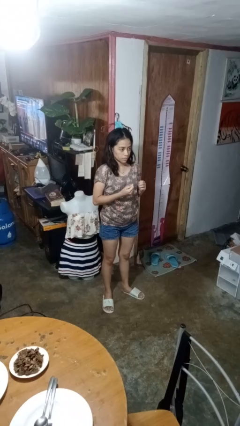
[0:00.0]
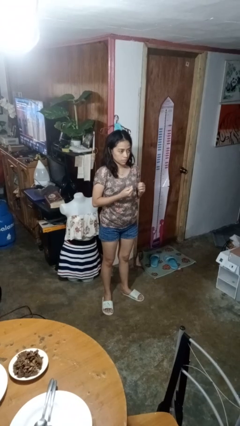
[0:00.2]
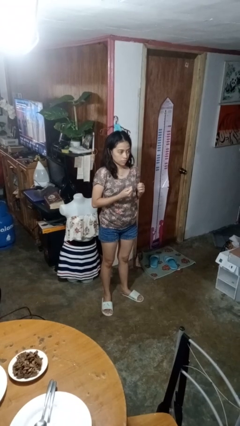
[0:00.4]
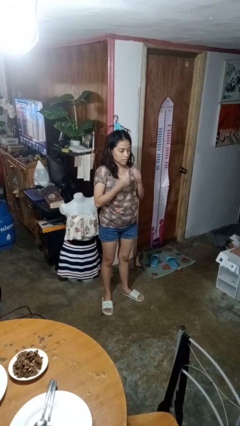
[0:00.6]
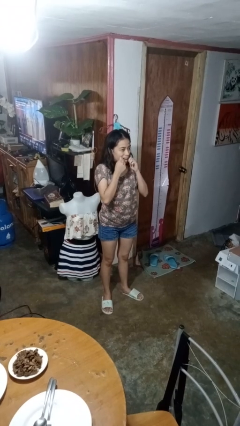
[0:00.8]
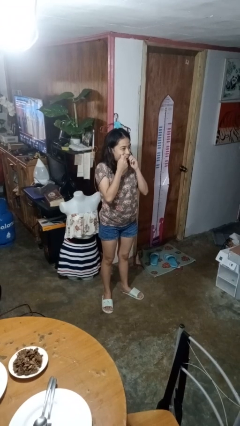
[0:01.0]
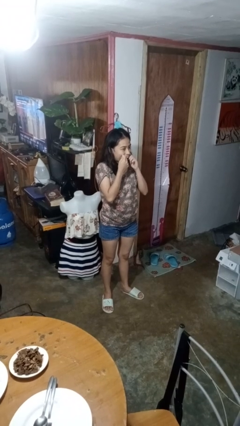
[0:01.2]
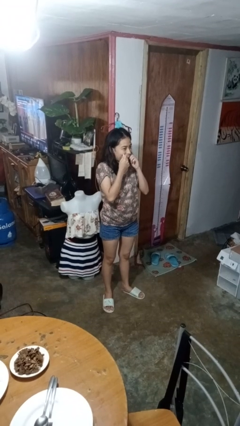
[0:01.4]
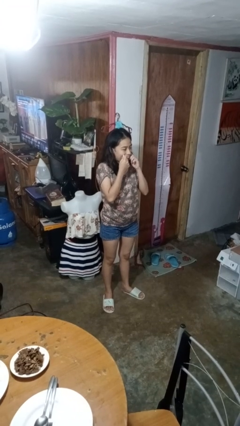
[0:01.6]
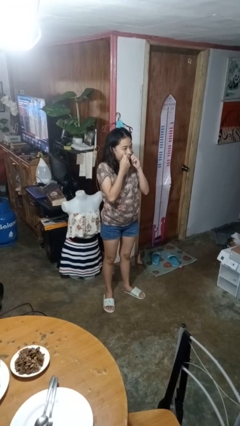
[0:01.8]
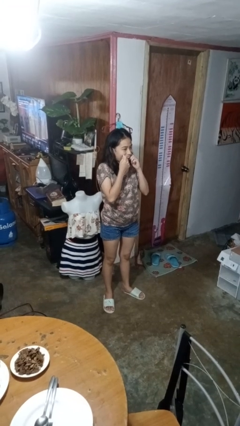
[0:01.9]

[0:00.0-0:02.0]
person flosses

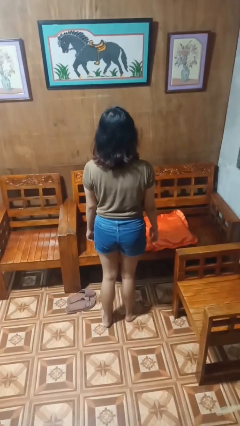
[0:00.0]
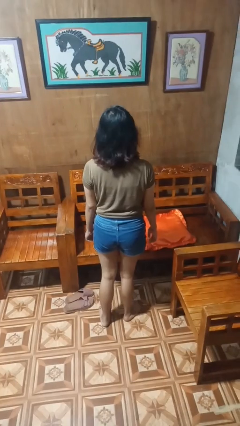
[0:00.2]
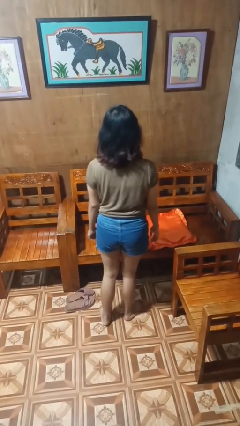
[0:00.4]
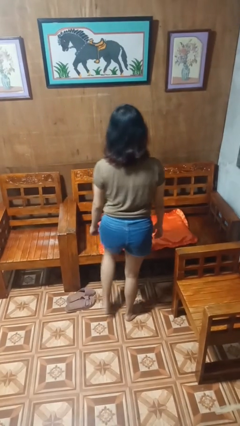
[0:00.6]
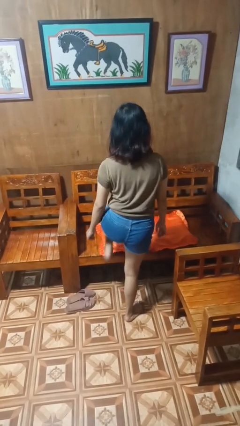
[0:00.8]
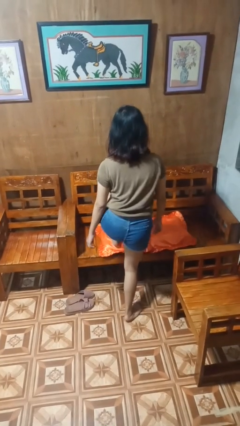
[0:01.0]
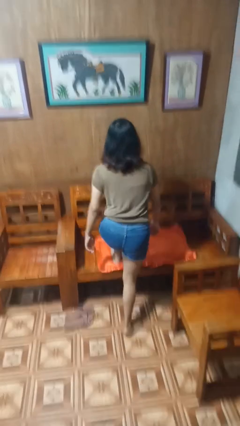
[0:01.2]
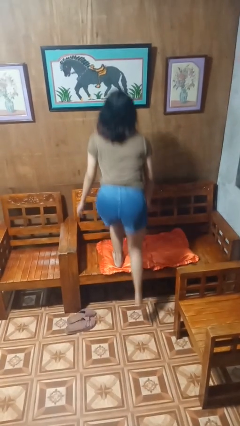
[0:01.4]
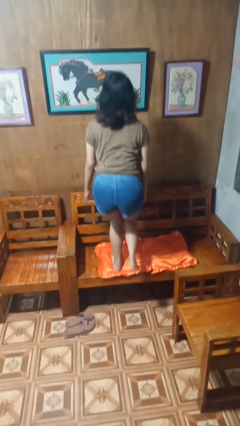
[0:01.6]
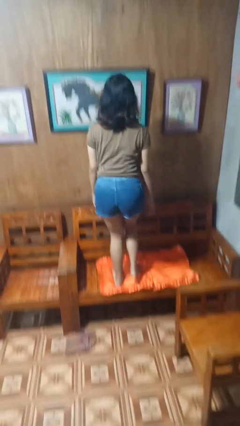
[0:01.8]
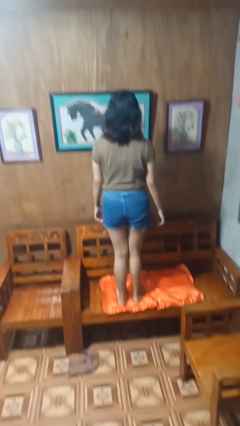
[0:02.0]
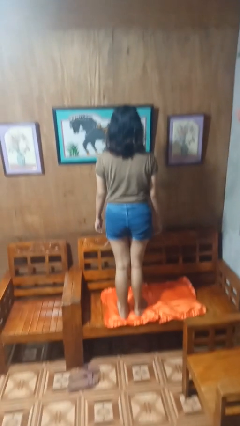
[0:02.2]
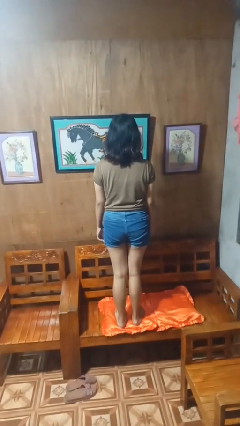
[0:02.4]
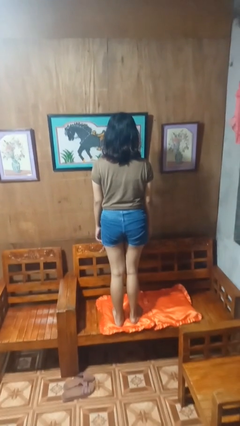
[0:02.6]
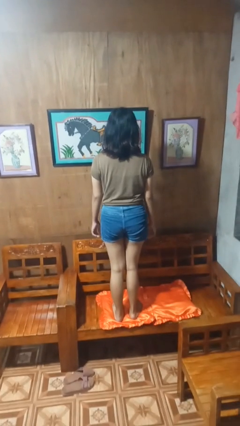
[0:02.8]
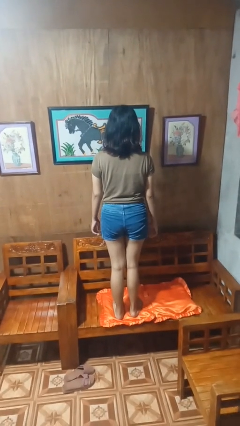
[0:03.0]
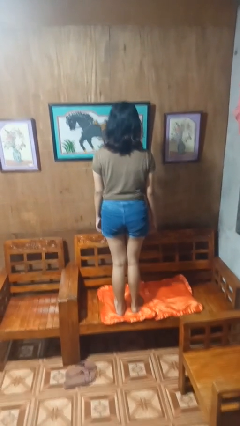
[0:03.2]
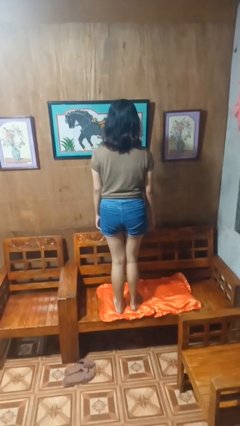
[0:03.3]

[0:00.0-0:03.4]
person climbs on couch

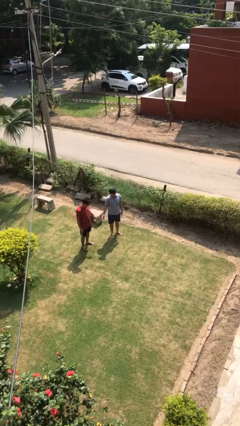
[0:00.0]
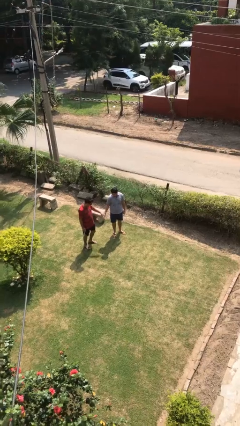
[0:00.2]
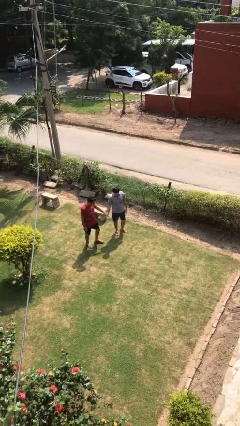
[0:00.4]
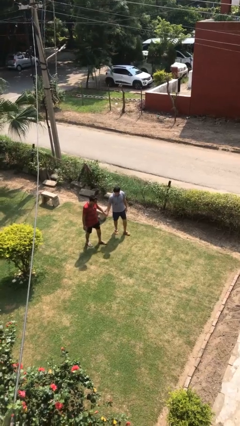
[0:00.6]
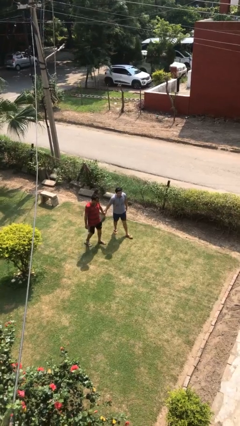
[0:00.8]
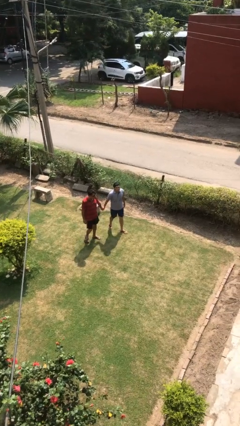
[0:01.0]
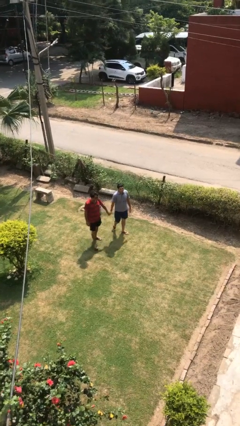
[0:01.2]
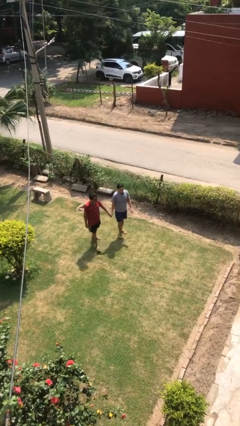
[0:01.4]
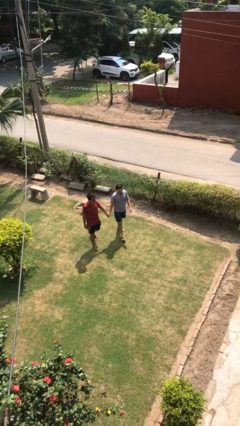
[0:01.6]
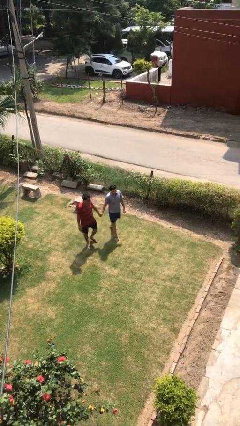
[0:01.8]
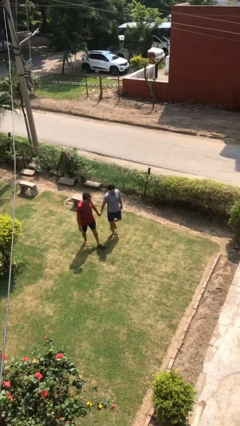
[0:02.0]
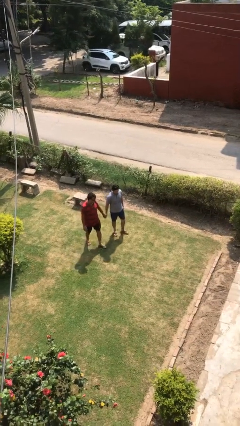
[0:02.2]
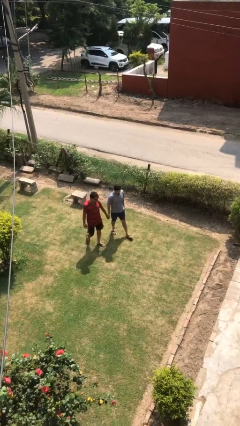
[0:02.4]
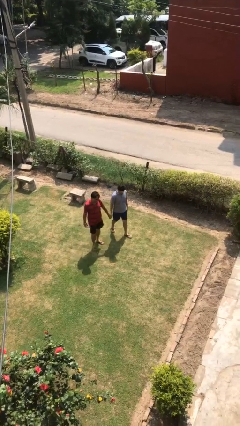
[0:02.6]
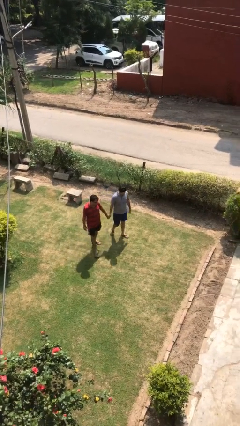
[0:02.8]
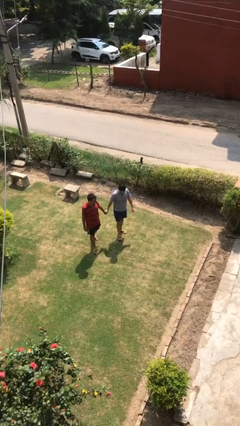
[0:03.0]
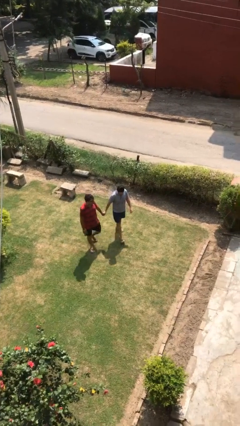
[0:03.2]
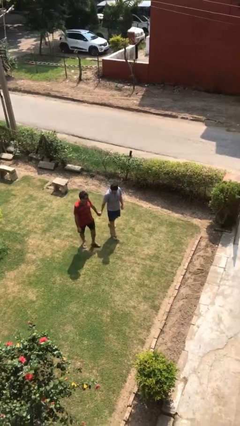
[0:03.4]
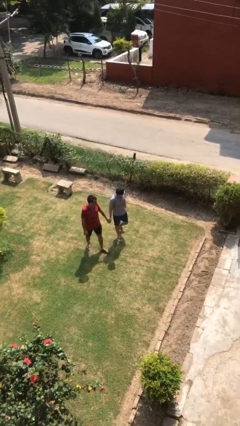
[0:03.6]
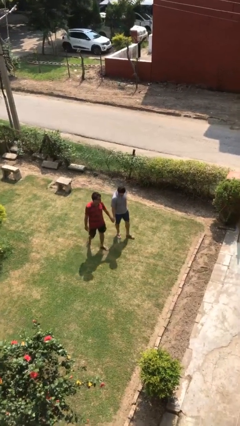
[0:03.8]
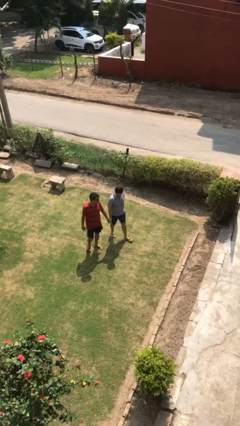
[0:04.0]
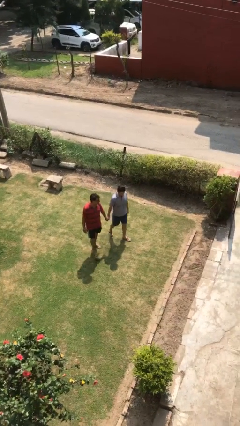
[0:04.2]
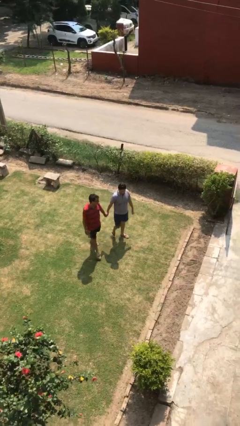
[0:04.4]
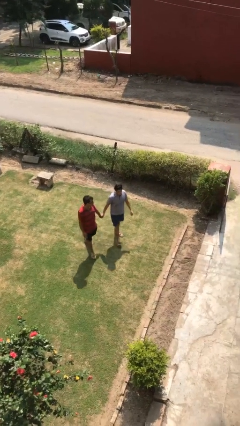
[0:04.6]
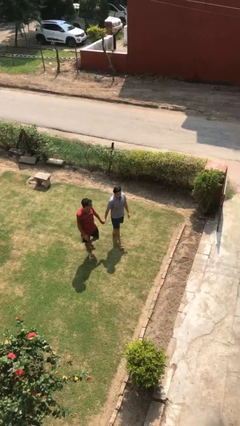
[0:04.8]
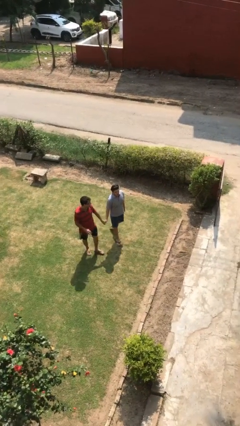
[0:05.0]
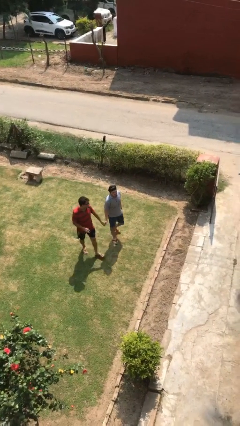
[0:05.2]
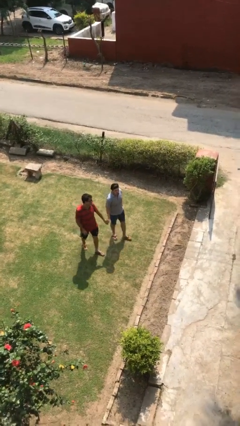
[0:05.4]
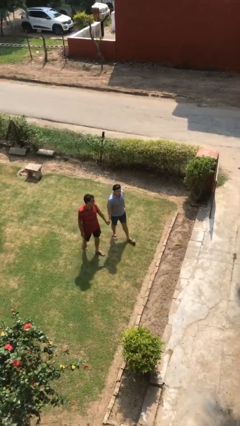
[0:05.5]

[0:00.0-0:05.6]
person holds hand

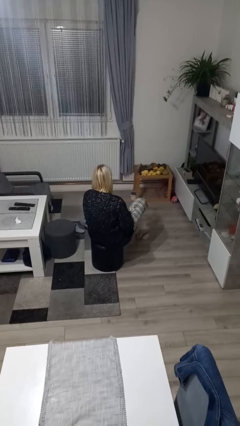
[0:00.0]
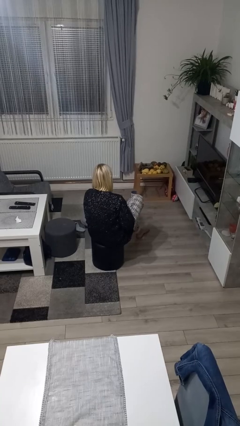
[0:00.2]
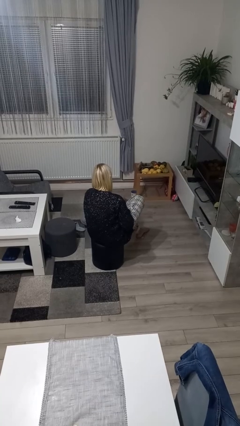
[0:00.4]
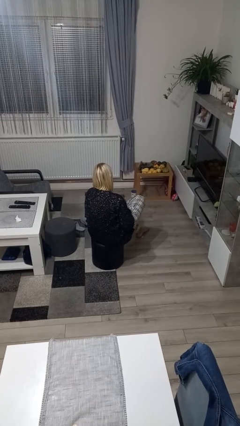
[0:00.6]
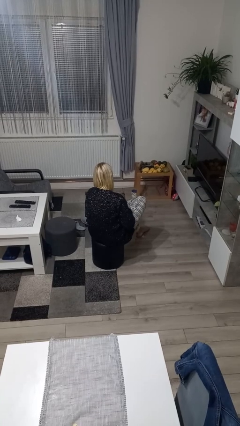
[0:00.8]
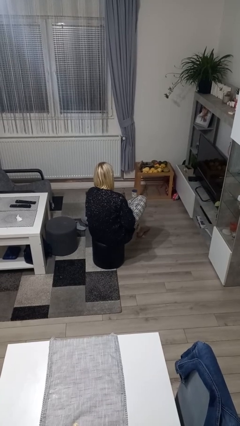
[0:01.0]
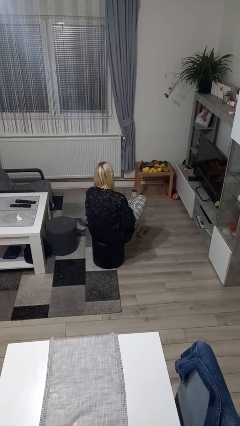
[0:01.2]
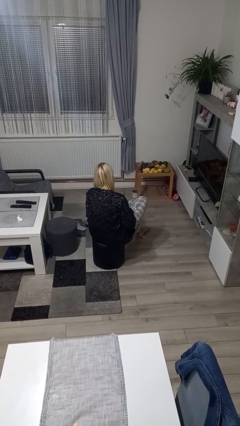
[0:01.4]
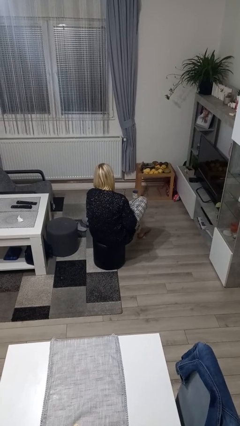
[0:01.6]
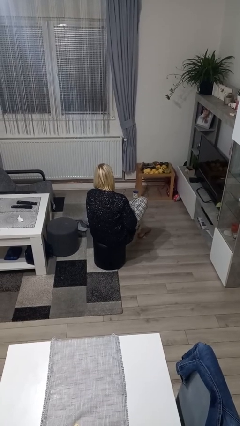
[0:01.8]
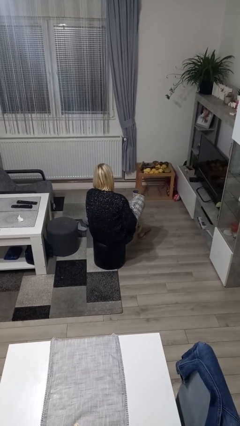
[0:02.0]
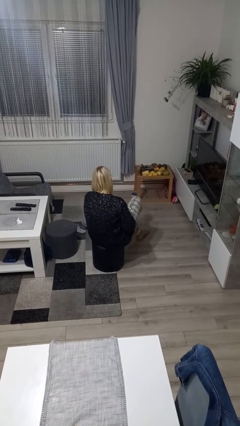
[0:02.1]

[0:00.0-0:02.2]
person rubs foot

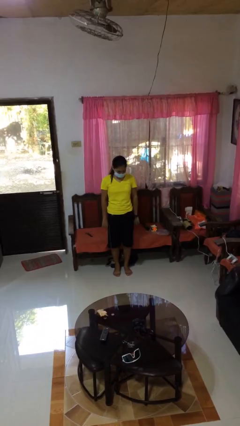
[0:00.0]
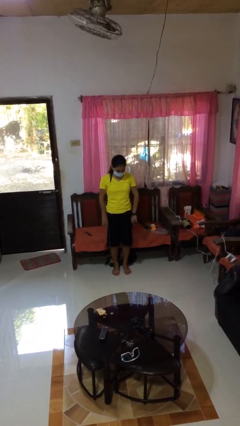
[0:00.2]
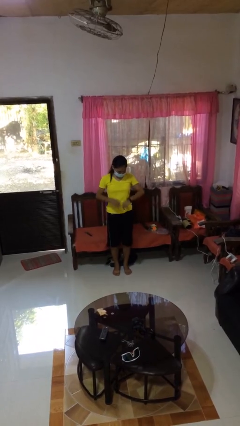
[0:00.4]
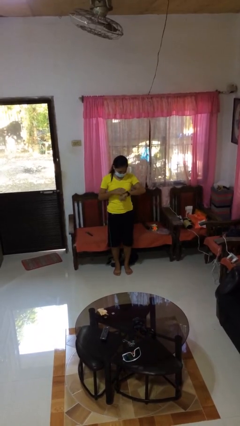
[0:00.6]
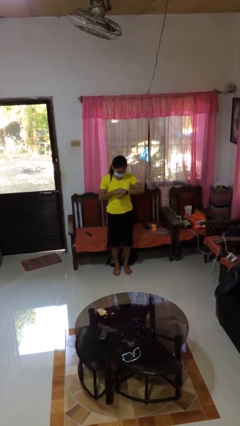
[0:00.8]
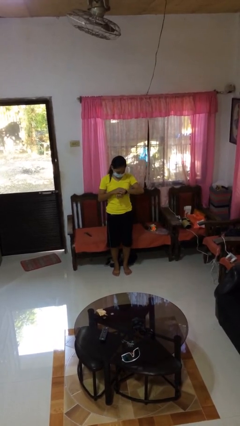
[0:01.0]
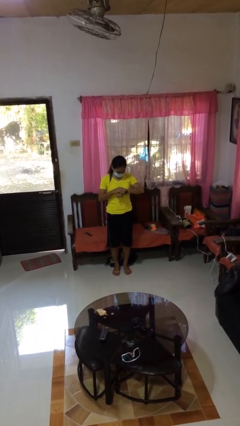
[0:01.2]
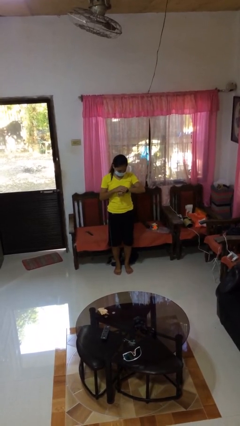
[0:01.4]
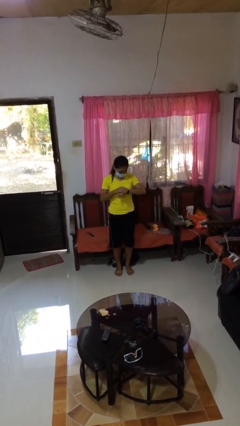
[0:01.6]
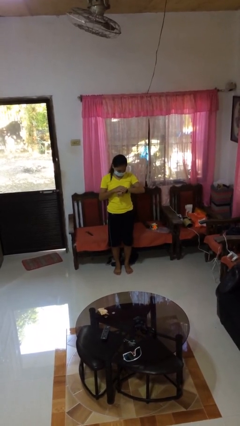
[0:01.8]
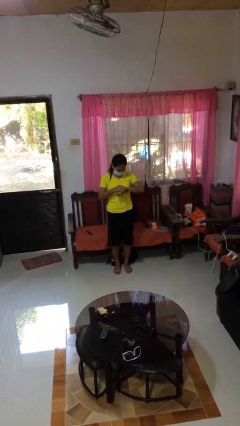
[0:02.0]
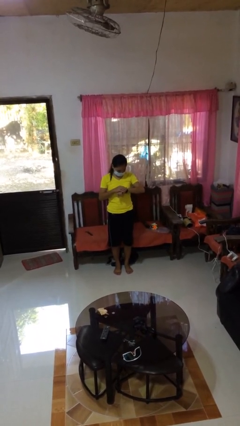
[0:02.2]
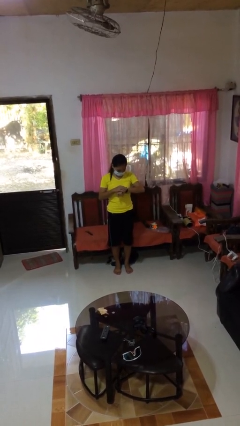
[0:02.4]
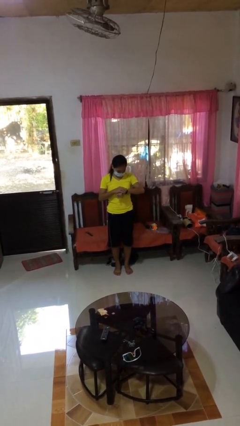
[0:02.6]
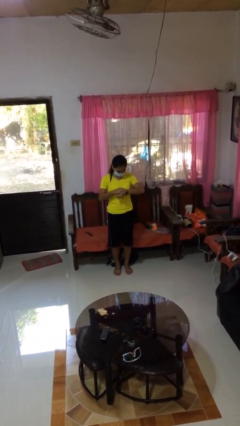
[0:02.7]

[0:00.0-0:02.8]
person looks at wristwatch

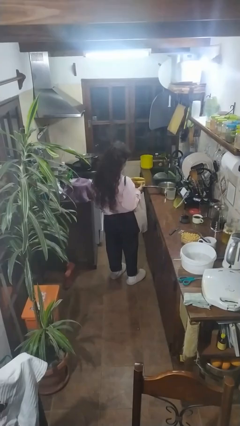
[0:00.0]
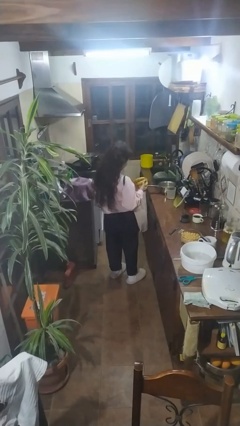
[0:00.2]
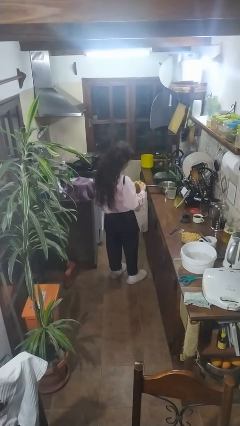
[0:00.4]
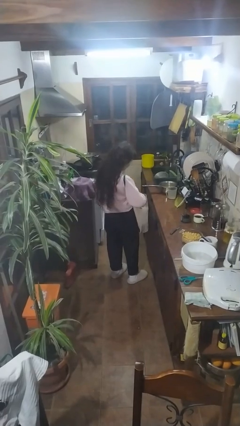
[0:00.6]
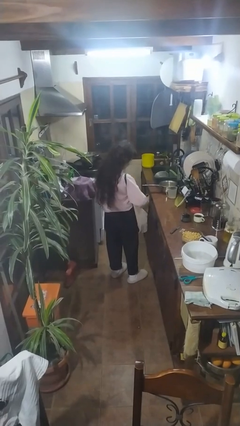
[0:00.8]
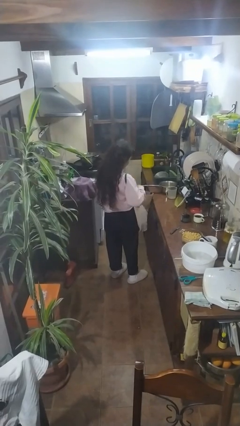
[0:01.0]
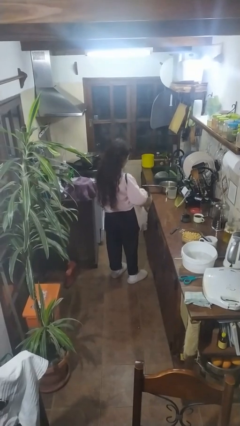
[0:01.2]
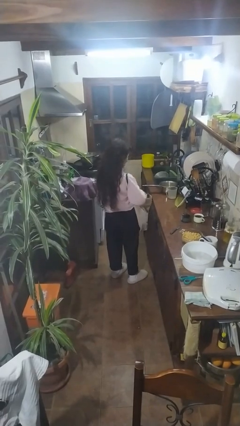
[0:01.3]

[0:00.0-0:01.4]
person puts object into bag

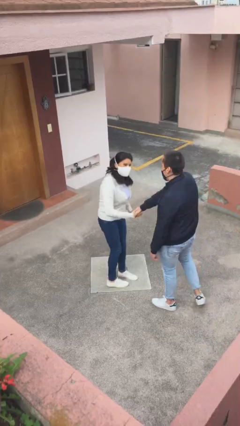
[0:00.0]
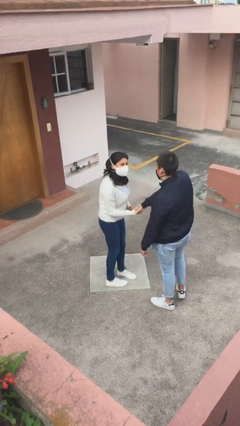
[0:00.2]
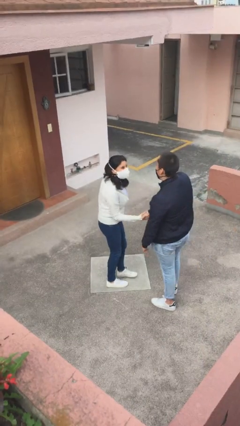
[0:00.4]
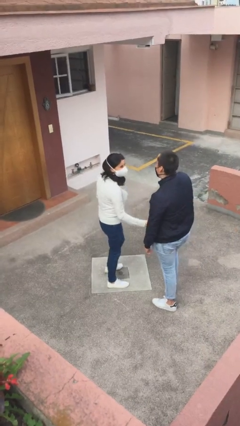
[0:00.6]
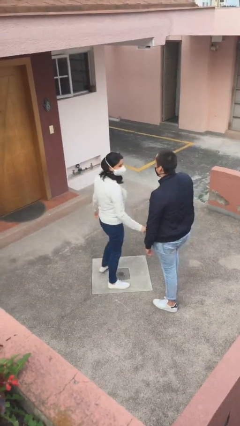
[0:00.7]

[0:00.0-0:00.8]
person shakes hand
